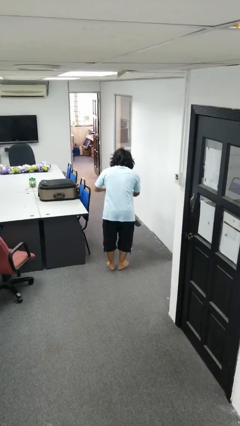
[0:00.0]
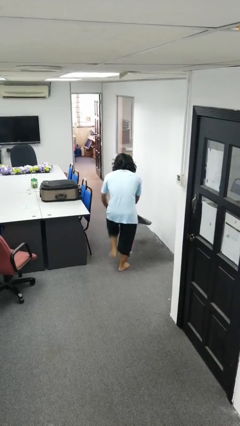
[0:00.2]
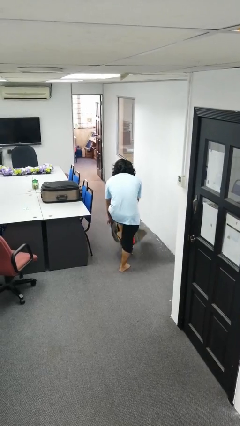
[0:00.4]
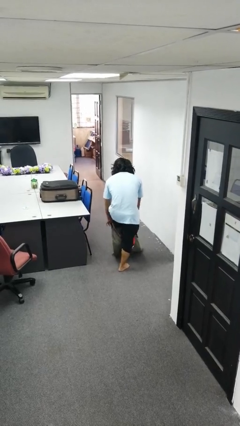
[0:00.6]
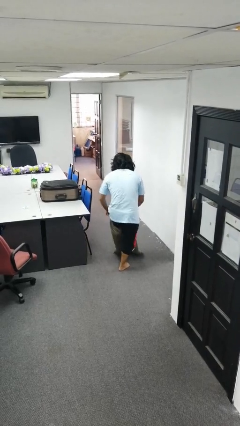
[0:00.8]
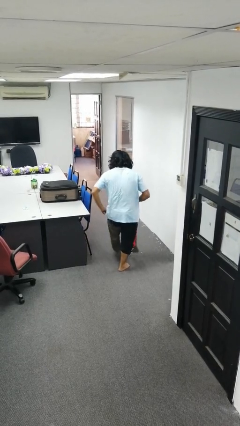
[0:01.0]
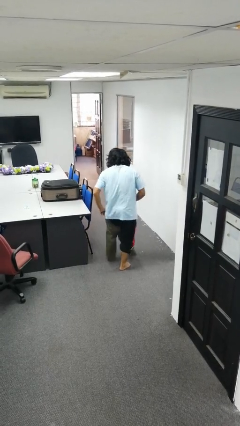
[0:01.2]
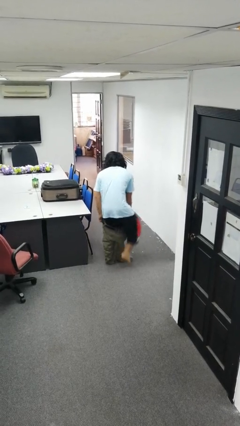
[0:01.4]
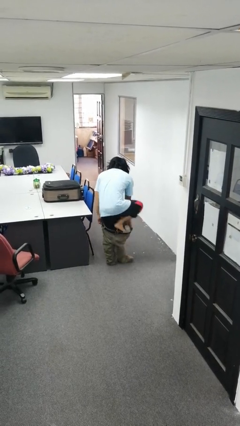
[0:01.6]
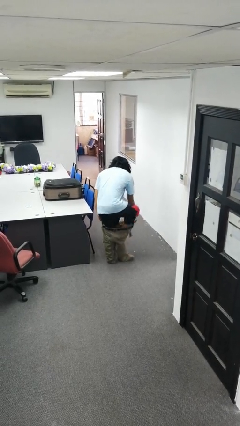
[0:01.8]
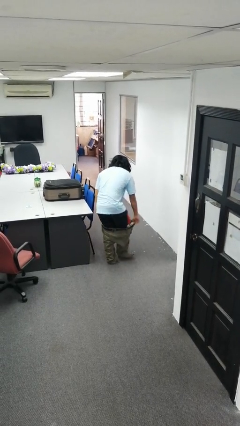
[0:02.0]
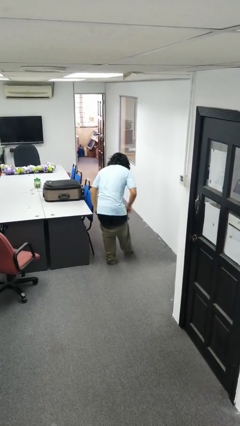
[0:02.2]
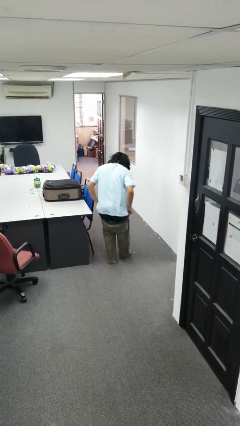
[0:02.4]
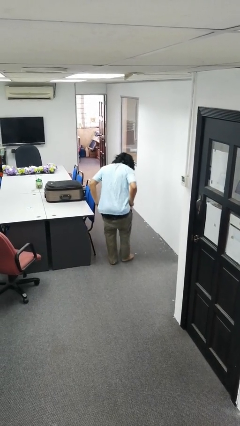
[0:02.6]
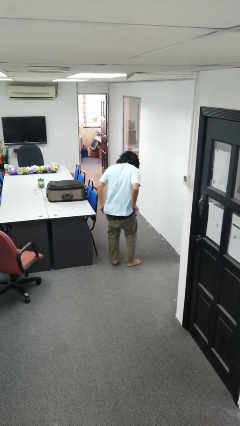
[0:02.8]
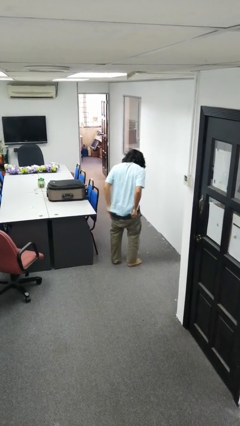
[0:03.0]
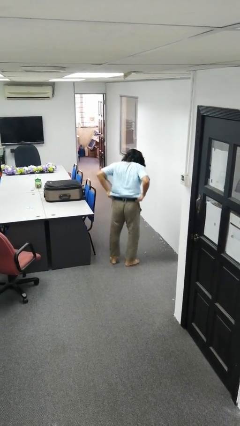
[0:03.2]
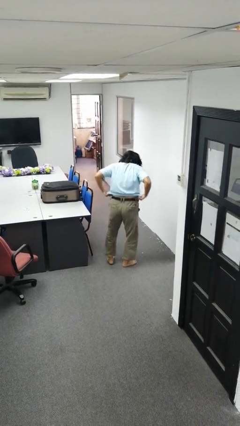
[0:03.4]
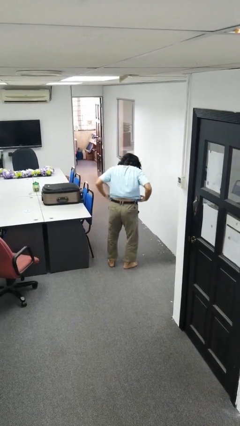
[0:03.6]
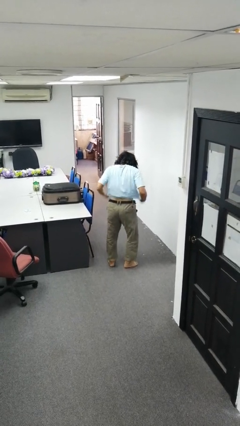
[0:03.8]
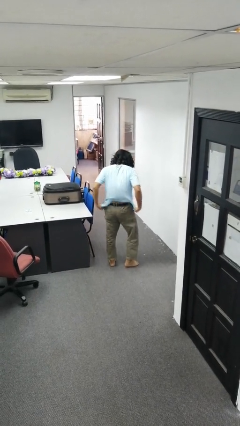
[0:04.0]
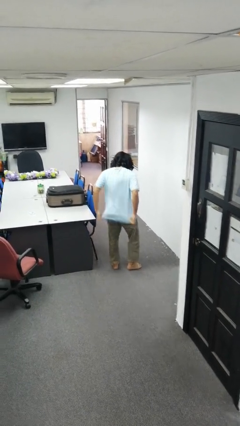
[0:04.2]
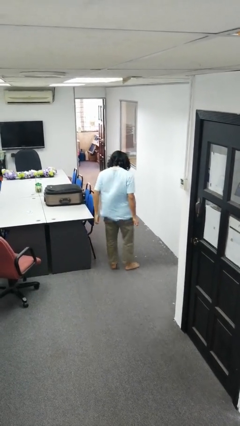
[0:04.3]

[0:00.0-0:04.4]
person takes off pants

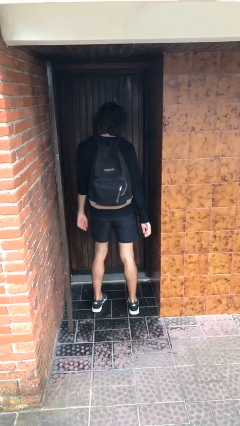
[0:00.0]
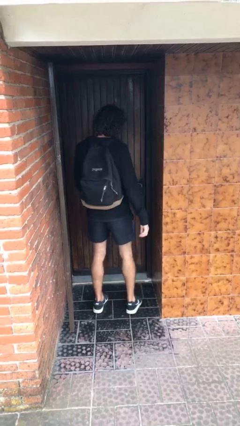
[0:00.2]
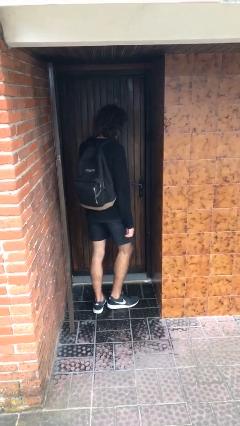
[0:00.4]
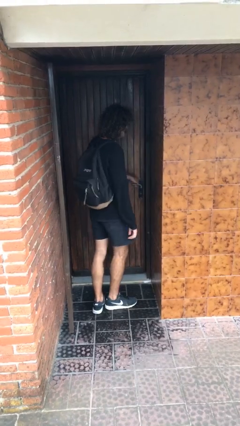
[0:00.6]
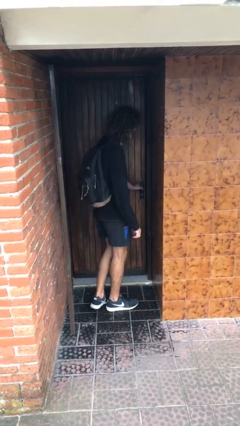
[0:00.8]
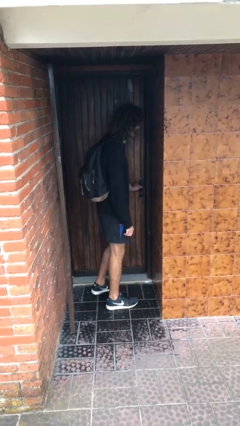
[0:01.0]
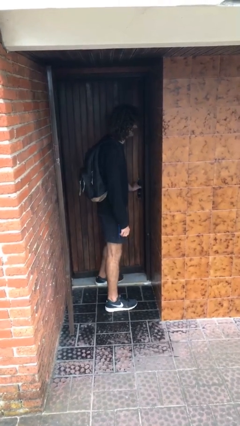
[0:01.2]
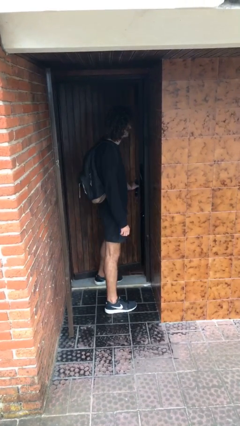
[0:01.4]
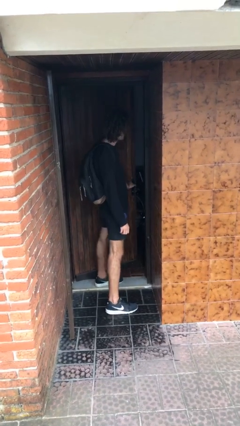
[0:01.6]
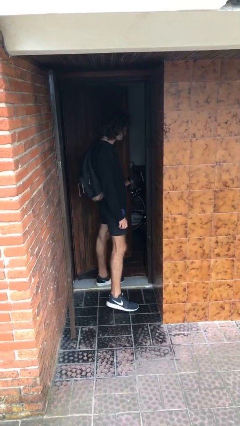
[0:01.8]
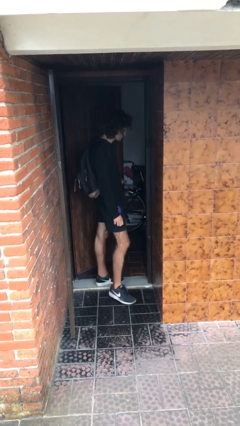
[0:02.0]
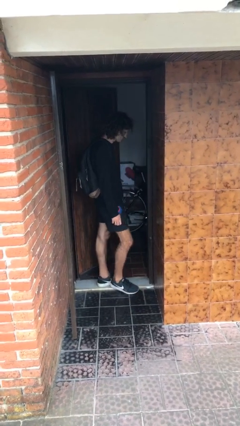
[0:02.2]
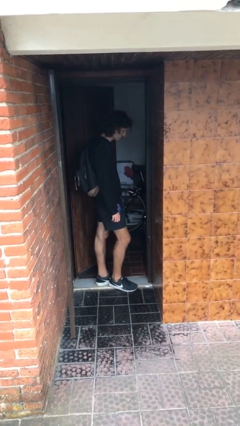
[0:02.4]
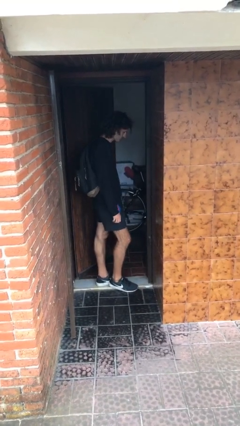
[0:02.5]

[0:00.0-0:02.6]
person opens facility door

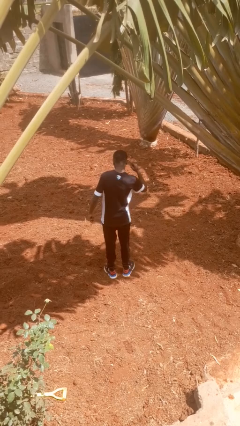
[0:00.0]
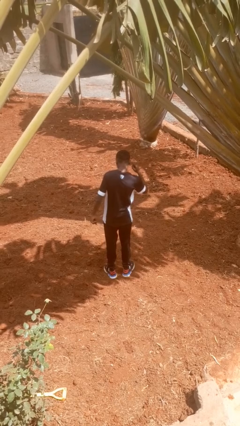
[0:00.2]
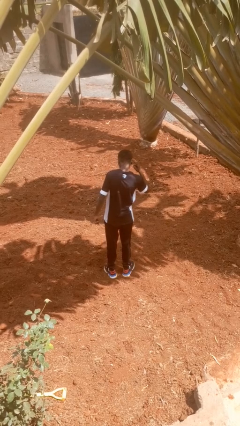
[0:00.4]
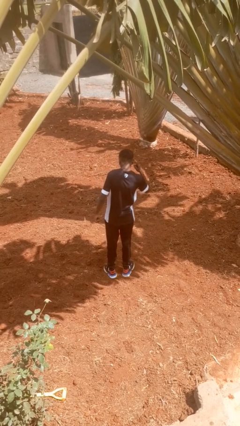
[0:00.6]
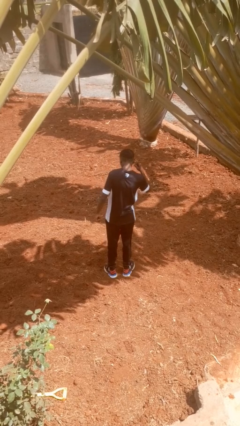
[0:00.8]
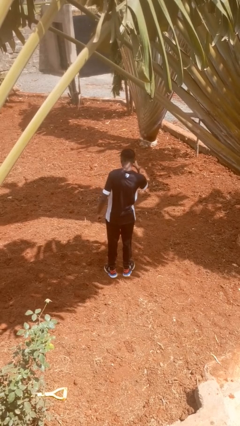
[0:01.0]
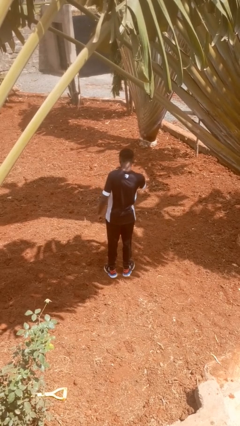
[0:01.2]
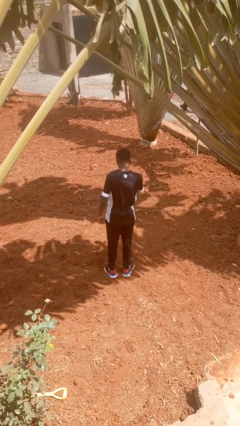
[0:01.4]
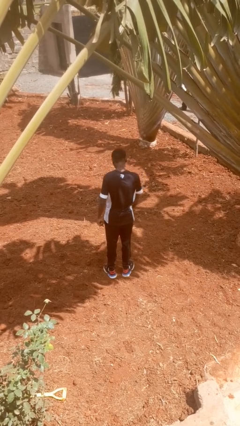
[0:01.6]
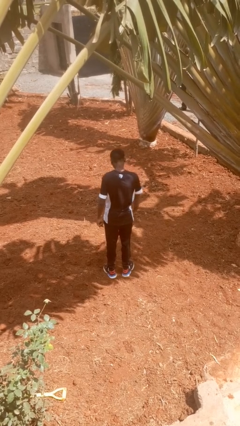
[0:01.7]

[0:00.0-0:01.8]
person gestures listen closely

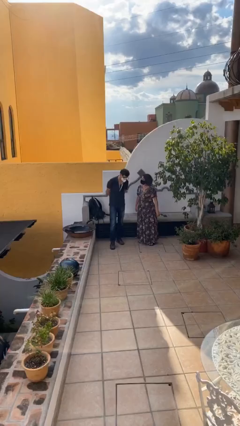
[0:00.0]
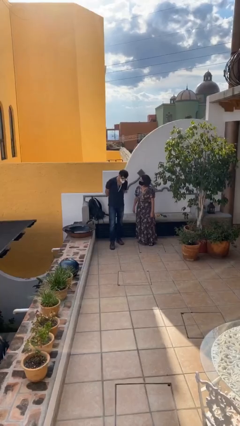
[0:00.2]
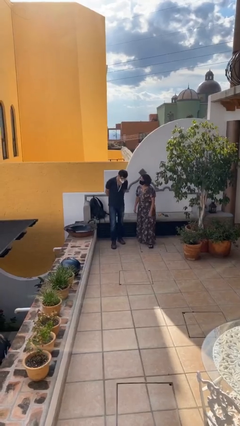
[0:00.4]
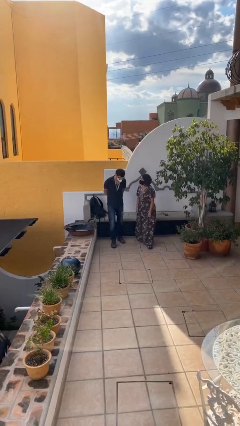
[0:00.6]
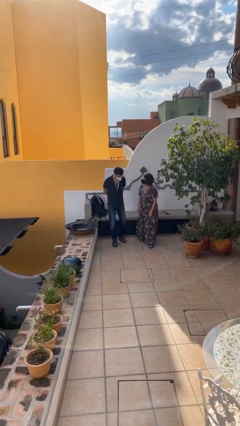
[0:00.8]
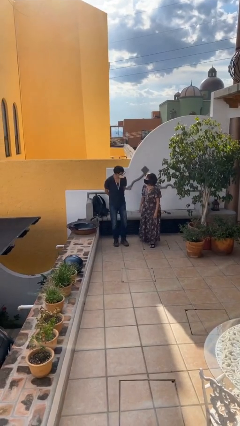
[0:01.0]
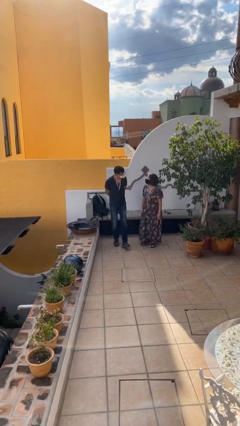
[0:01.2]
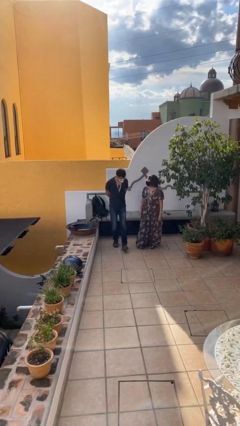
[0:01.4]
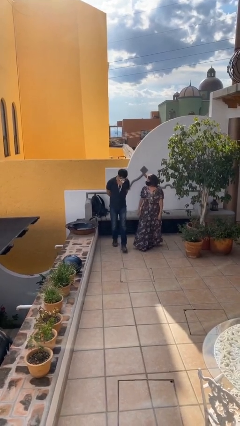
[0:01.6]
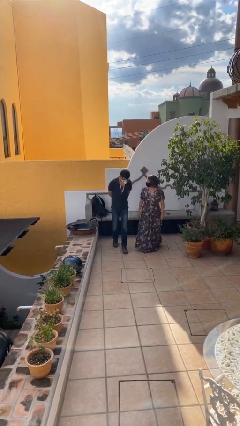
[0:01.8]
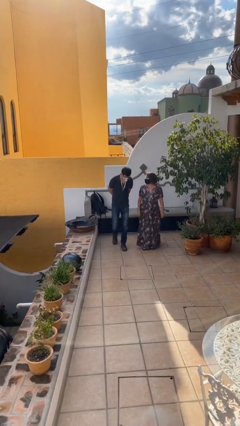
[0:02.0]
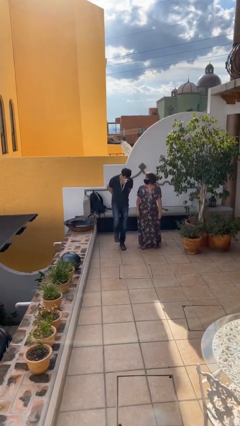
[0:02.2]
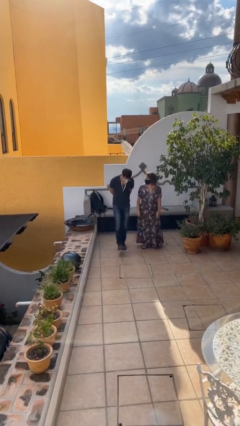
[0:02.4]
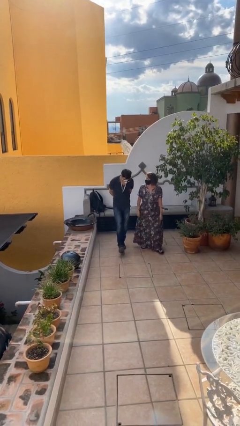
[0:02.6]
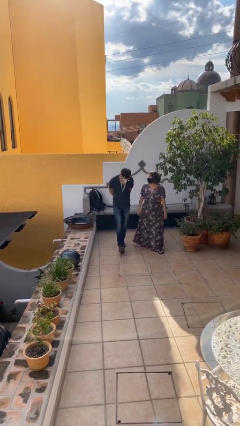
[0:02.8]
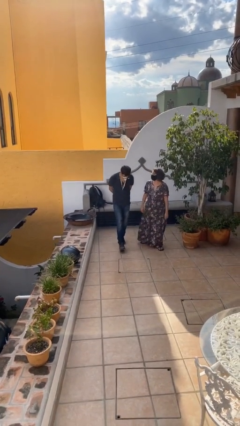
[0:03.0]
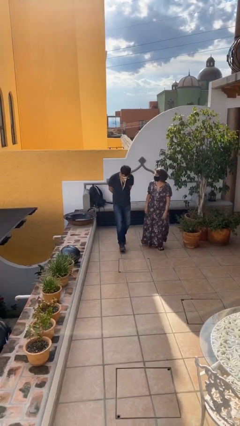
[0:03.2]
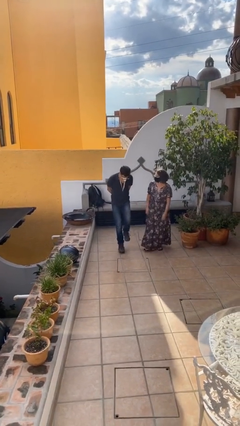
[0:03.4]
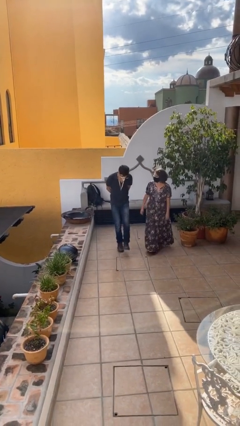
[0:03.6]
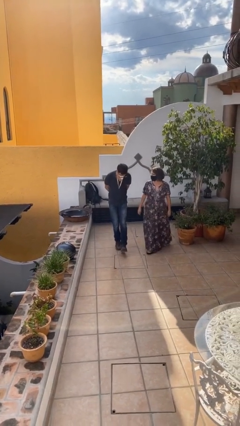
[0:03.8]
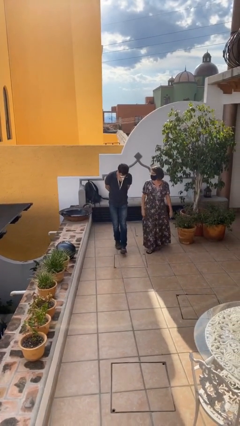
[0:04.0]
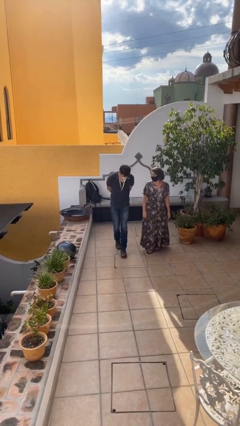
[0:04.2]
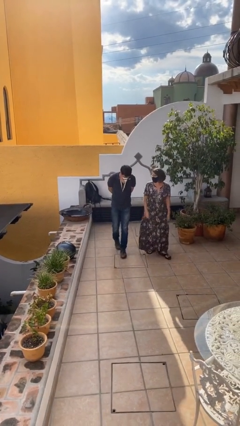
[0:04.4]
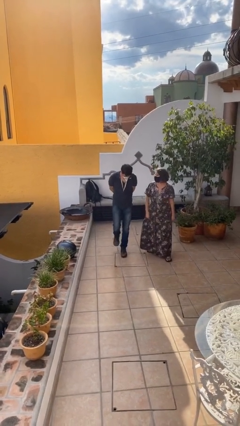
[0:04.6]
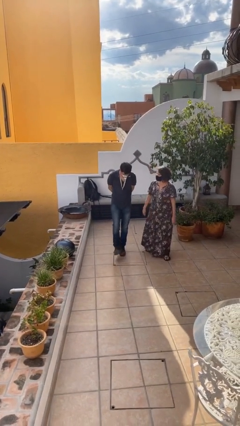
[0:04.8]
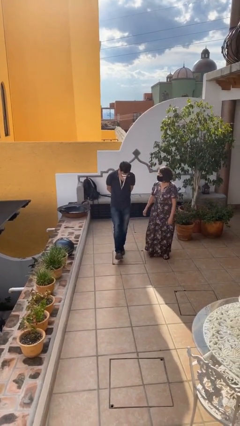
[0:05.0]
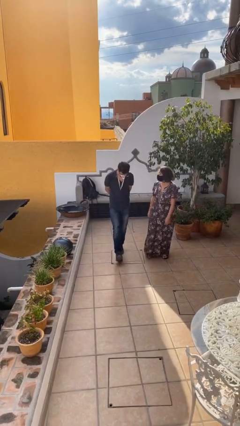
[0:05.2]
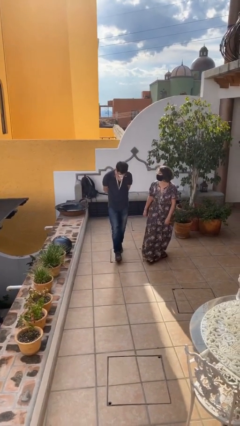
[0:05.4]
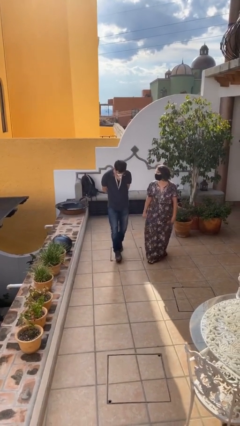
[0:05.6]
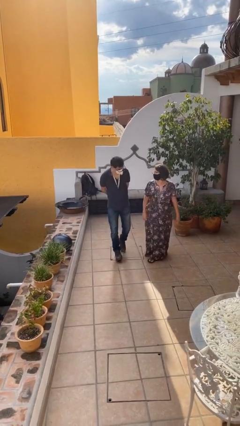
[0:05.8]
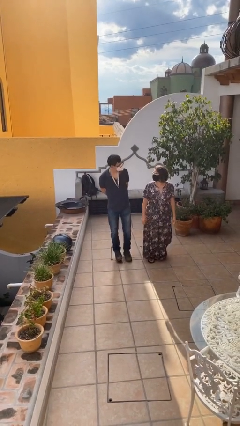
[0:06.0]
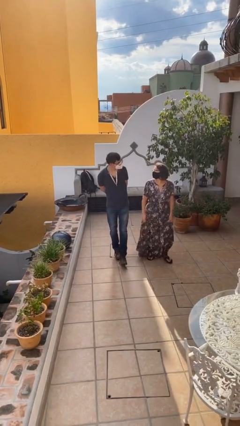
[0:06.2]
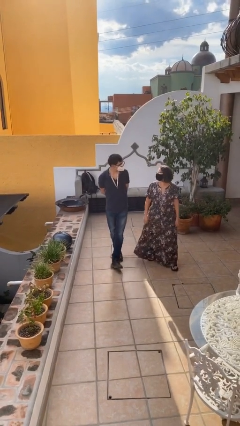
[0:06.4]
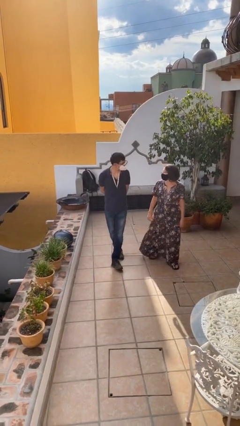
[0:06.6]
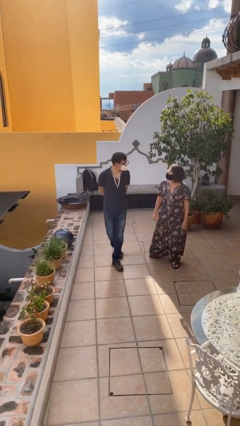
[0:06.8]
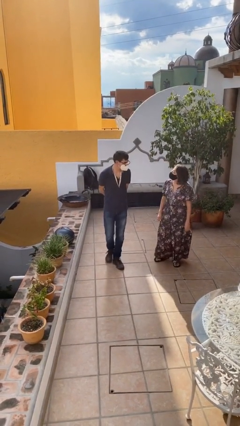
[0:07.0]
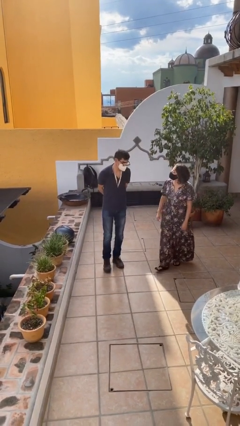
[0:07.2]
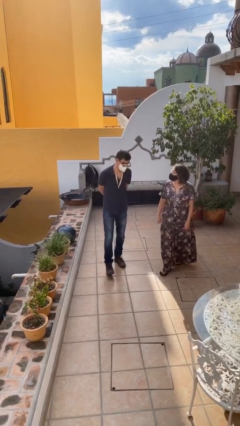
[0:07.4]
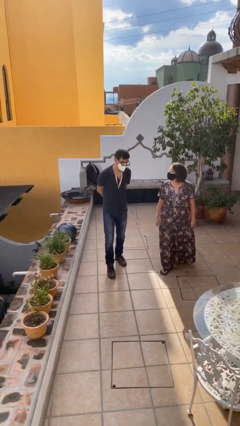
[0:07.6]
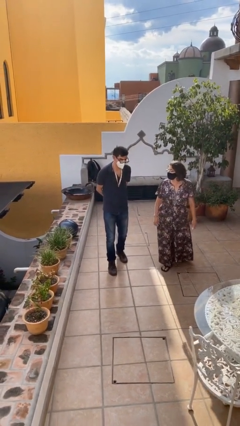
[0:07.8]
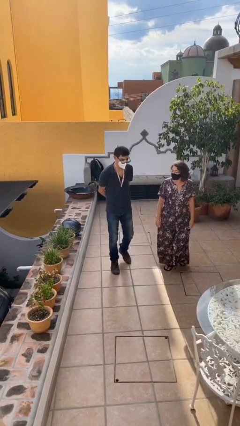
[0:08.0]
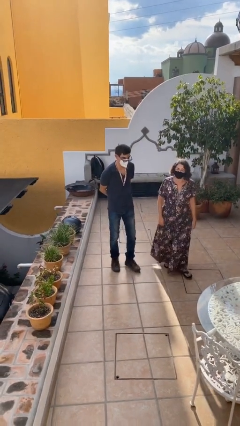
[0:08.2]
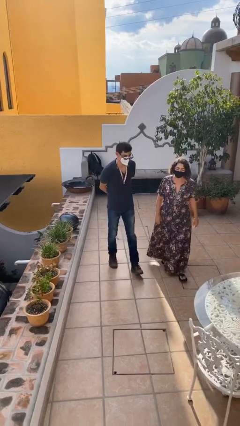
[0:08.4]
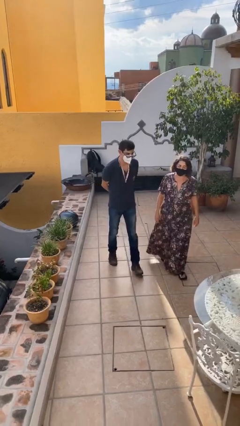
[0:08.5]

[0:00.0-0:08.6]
person talks to person

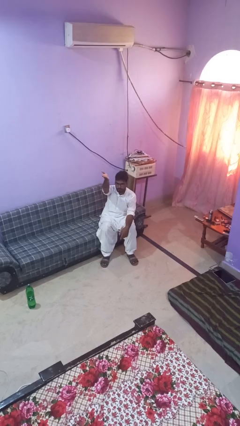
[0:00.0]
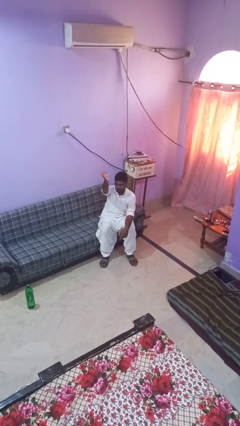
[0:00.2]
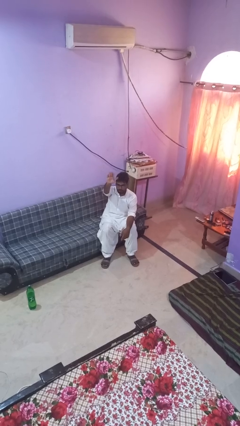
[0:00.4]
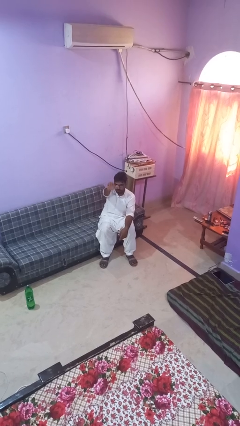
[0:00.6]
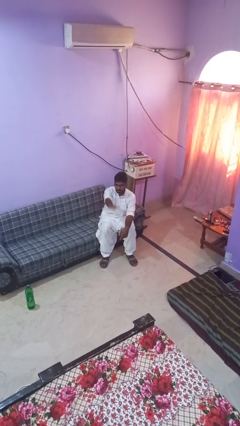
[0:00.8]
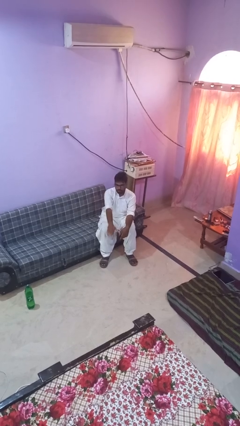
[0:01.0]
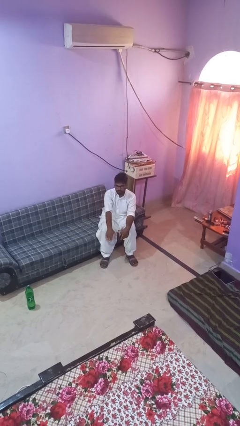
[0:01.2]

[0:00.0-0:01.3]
person gestures swipe down
